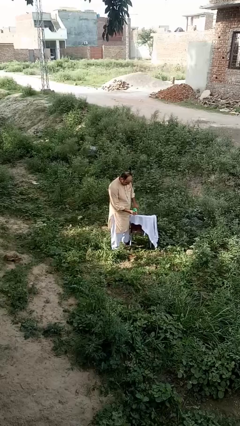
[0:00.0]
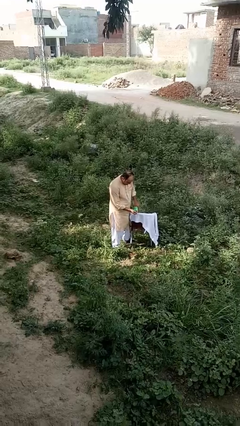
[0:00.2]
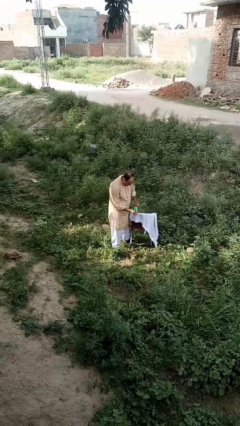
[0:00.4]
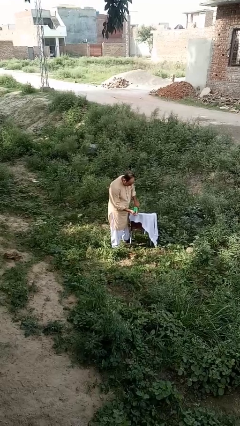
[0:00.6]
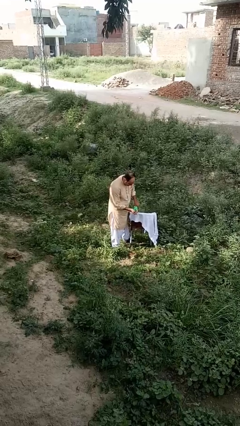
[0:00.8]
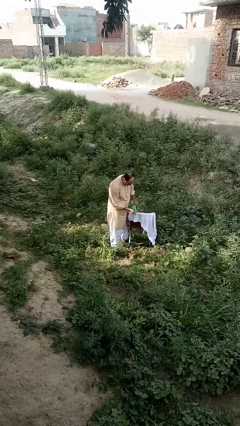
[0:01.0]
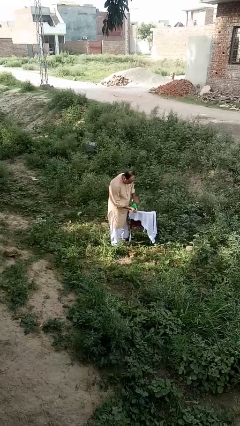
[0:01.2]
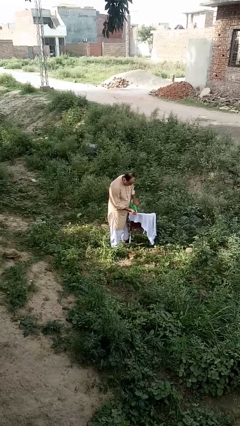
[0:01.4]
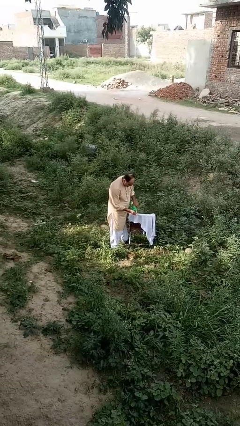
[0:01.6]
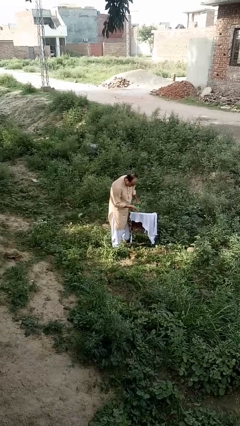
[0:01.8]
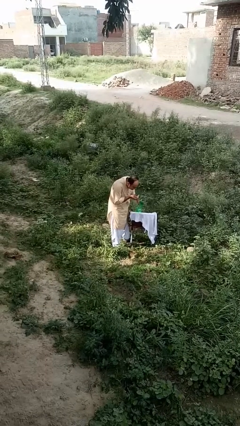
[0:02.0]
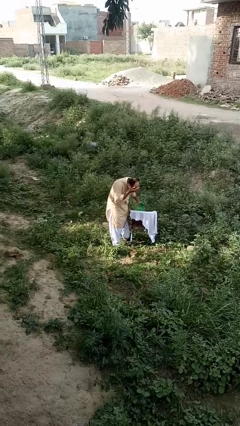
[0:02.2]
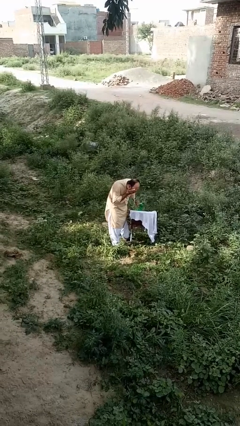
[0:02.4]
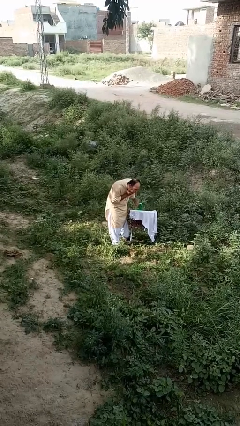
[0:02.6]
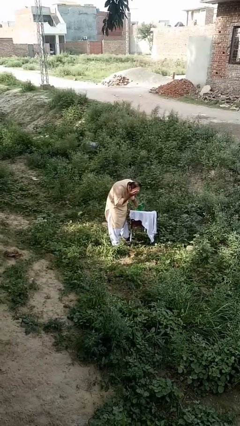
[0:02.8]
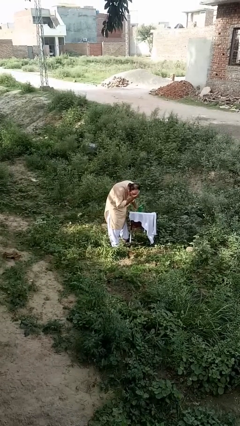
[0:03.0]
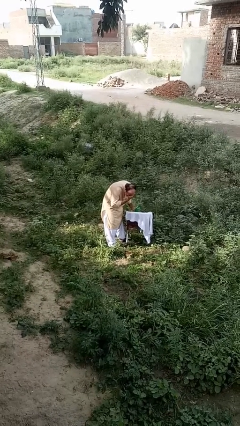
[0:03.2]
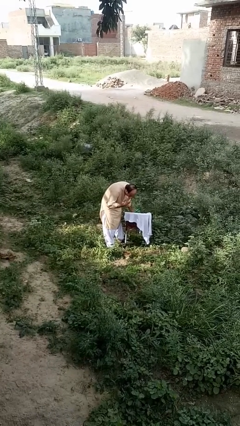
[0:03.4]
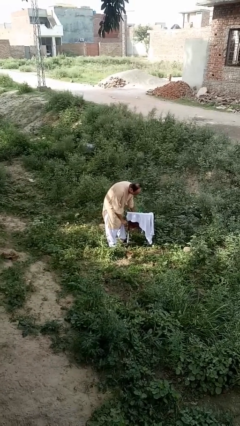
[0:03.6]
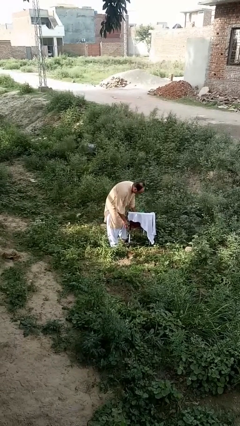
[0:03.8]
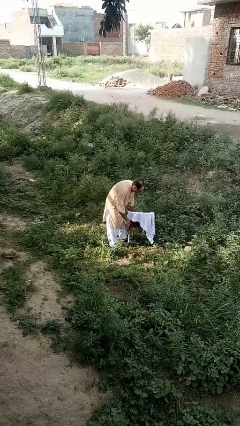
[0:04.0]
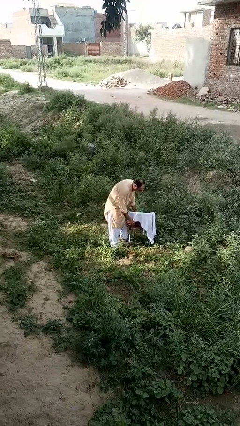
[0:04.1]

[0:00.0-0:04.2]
person washes face

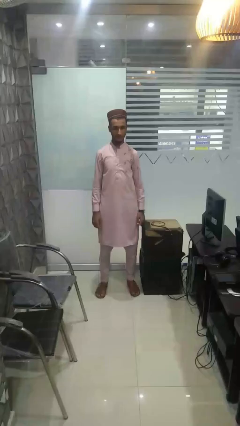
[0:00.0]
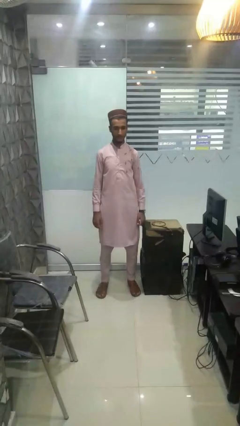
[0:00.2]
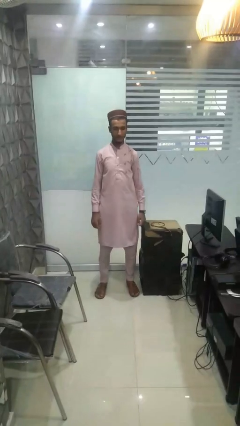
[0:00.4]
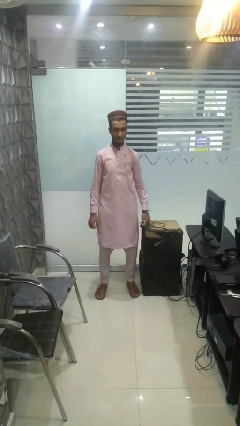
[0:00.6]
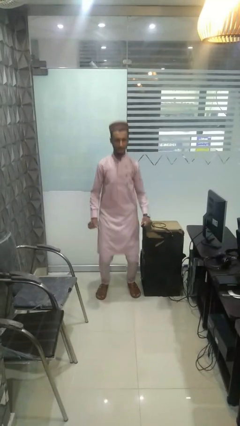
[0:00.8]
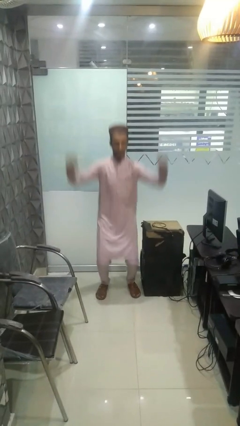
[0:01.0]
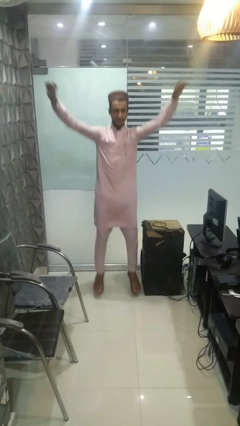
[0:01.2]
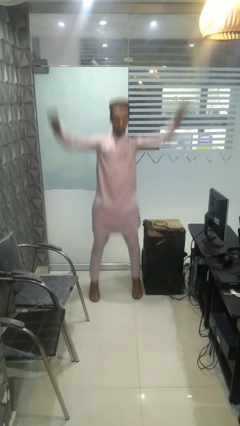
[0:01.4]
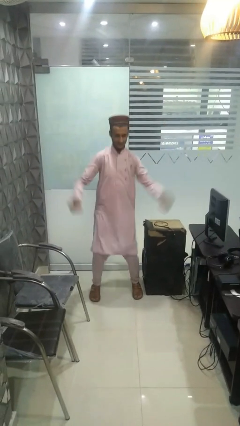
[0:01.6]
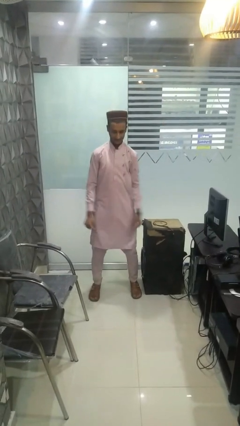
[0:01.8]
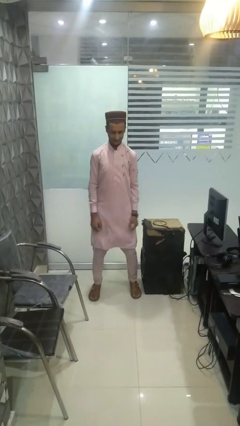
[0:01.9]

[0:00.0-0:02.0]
person exercises with jumping jacks

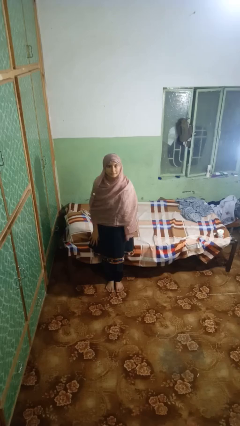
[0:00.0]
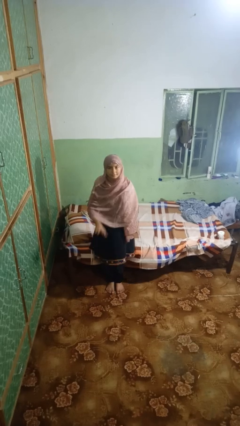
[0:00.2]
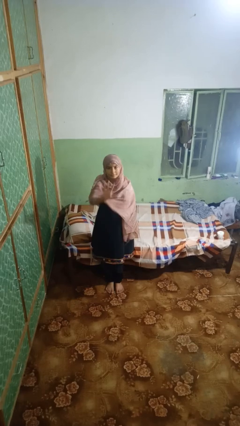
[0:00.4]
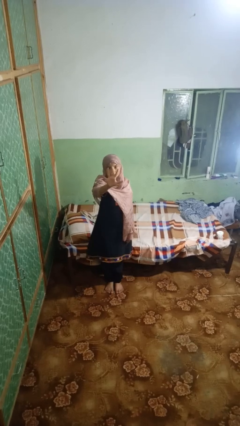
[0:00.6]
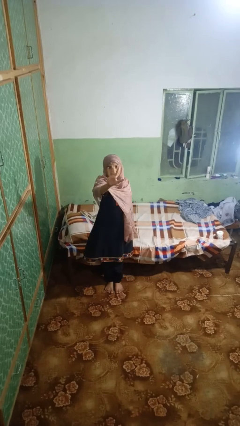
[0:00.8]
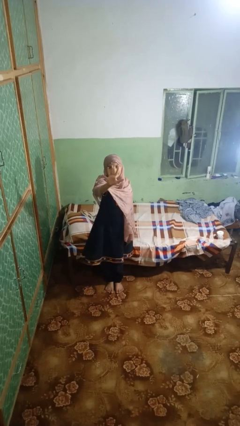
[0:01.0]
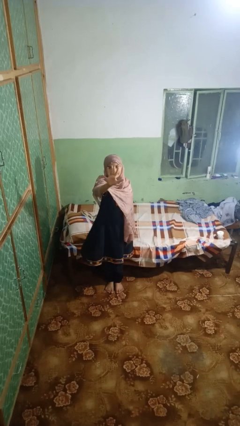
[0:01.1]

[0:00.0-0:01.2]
person gestures number five

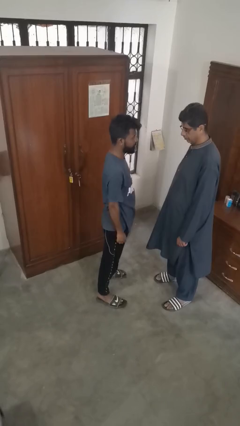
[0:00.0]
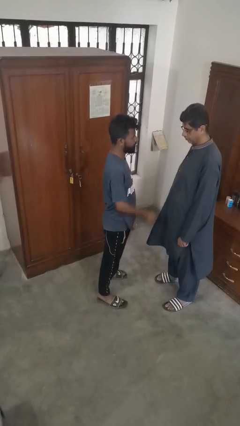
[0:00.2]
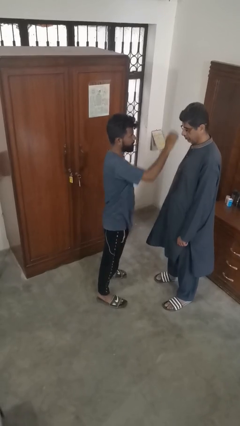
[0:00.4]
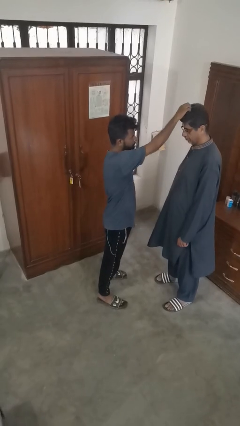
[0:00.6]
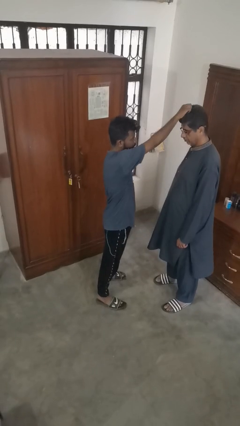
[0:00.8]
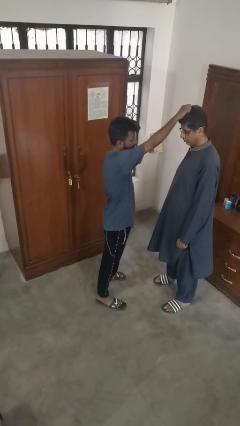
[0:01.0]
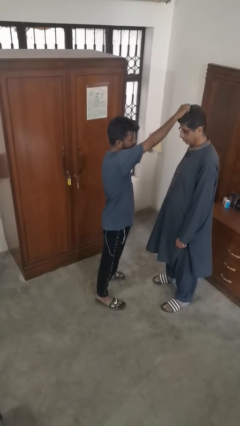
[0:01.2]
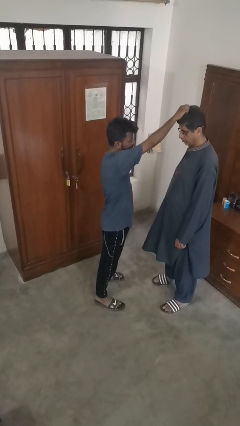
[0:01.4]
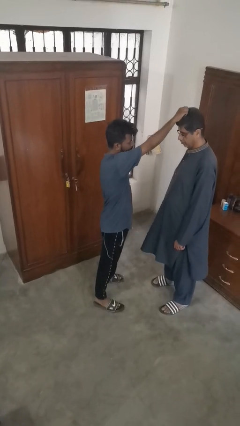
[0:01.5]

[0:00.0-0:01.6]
person grabs person by hair

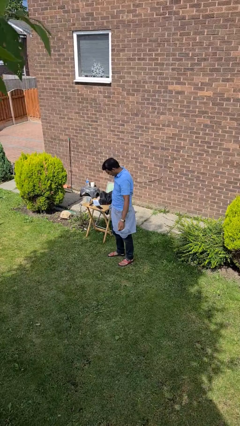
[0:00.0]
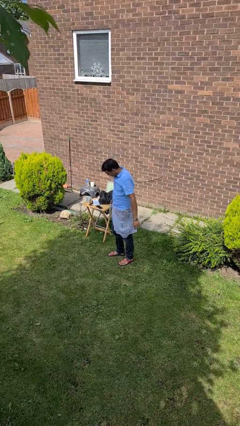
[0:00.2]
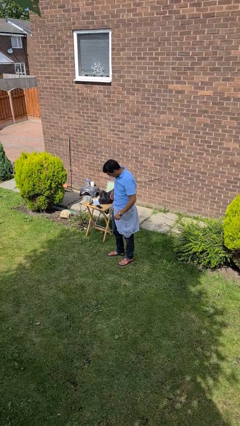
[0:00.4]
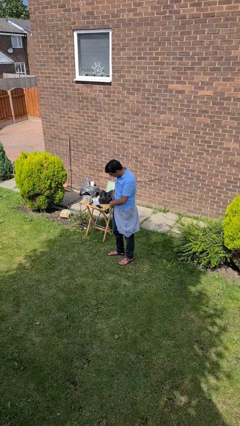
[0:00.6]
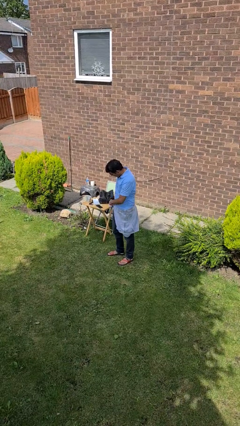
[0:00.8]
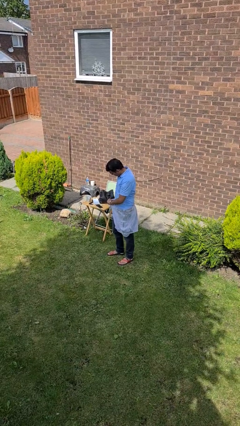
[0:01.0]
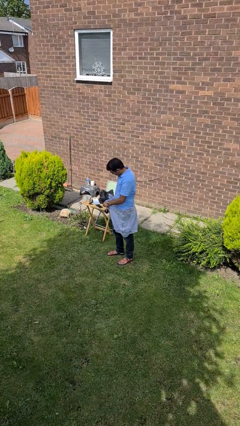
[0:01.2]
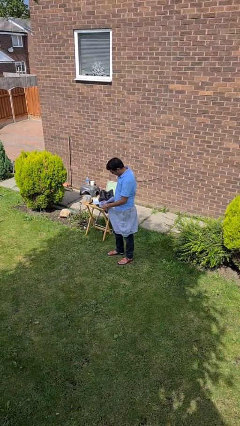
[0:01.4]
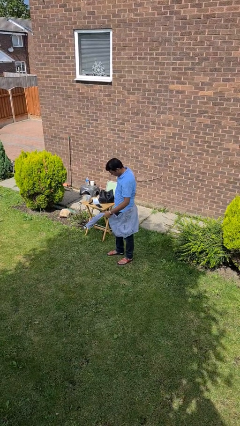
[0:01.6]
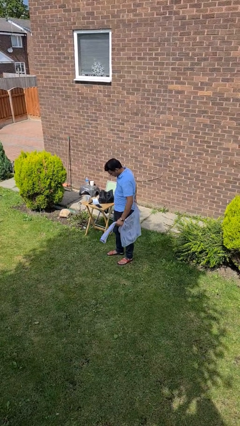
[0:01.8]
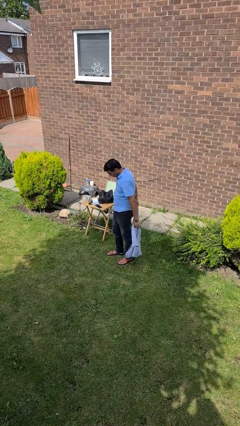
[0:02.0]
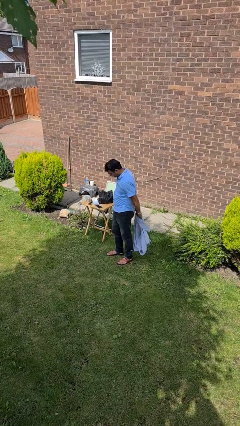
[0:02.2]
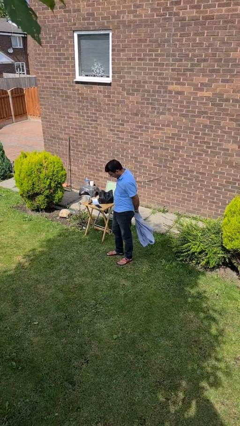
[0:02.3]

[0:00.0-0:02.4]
person unties jacket around waist

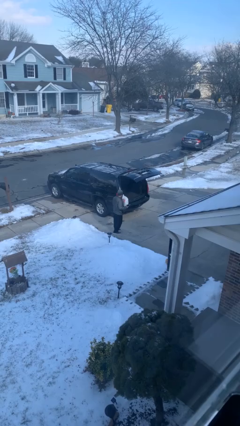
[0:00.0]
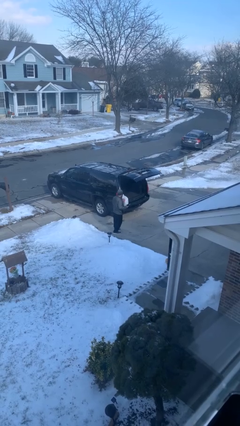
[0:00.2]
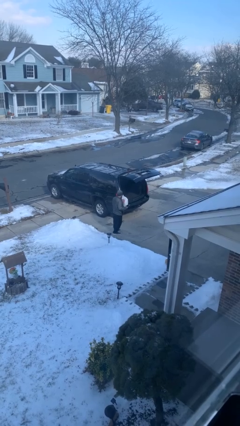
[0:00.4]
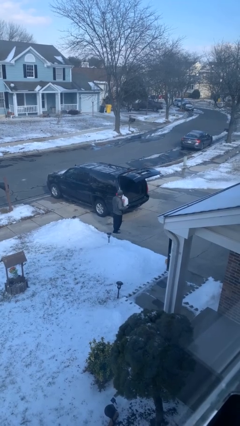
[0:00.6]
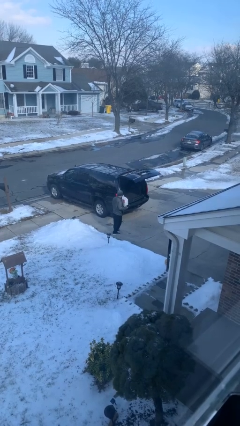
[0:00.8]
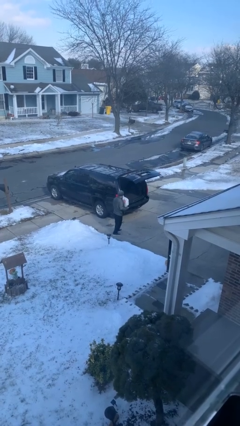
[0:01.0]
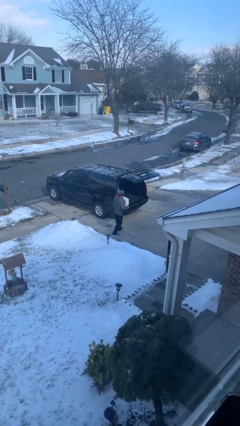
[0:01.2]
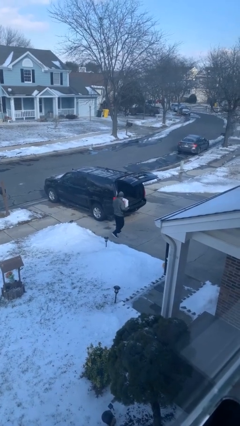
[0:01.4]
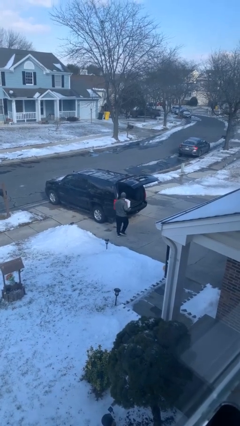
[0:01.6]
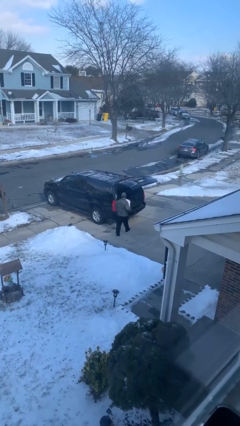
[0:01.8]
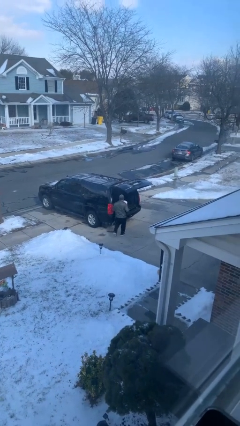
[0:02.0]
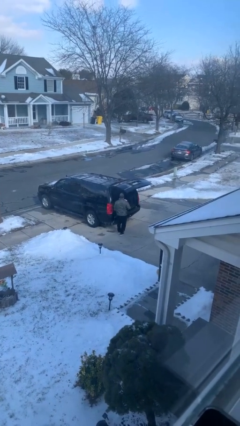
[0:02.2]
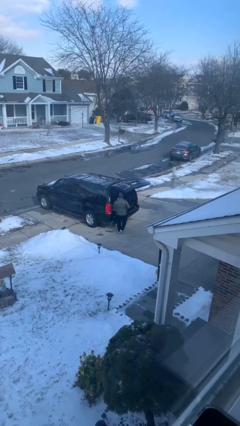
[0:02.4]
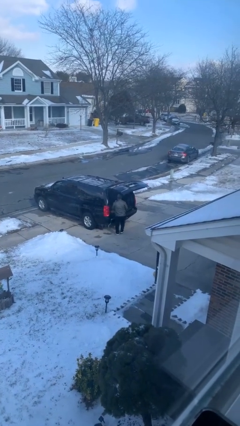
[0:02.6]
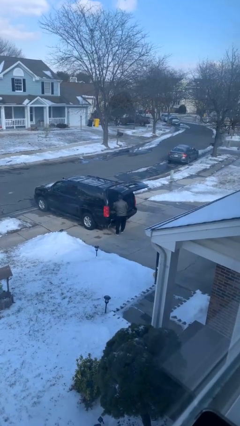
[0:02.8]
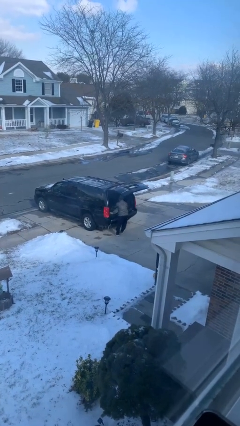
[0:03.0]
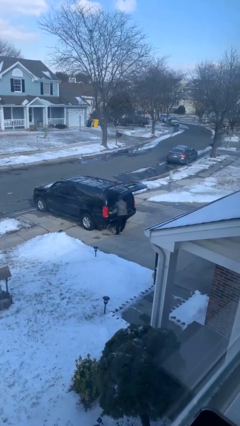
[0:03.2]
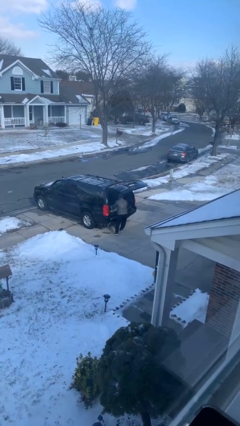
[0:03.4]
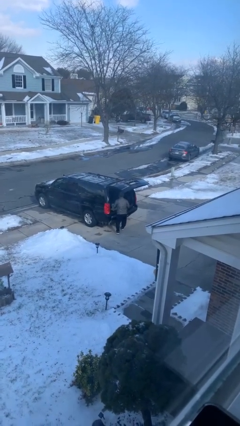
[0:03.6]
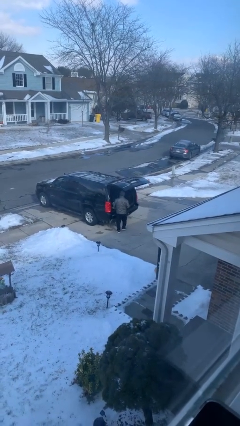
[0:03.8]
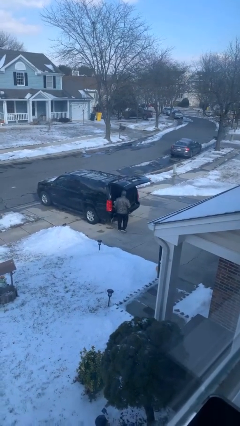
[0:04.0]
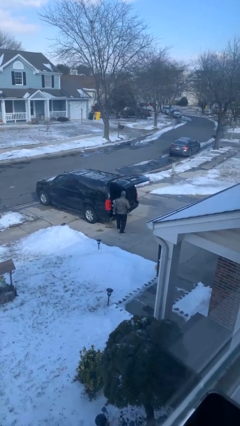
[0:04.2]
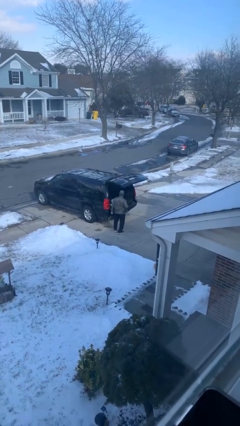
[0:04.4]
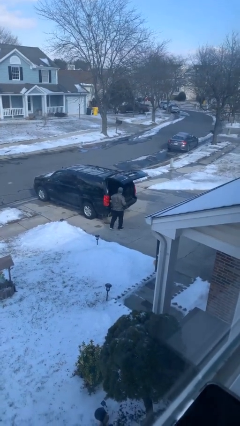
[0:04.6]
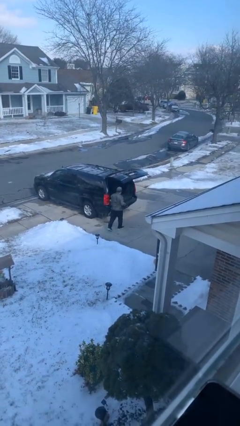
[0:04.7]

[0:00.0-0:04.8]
person loads car

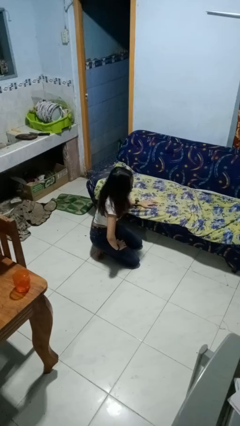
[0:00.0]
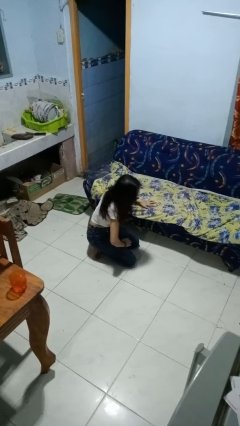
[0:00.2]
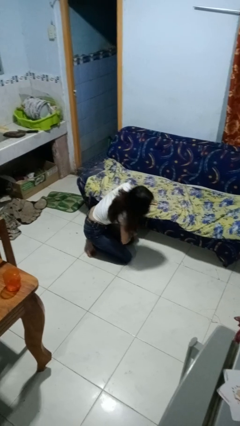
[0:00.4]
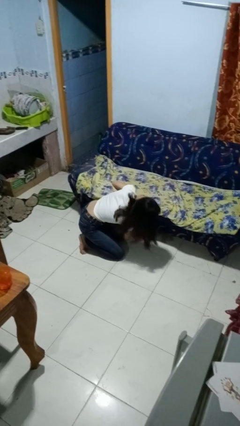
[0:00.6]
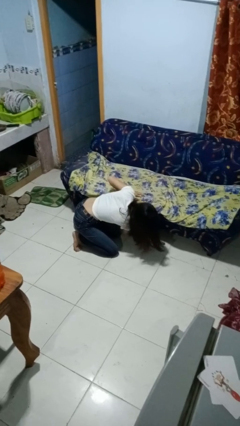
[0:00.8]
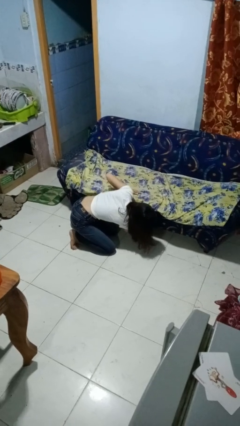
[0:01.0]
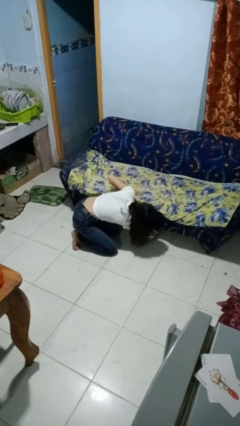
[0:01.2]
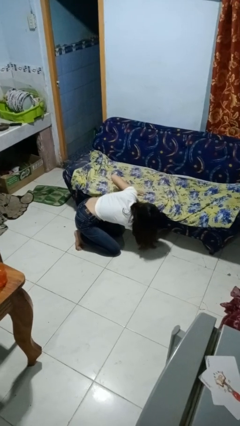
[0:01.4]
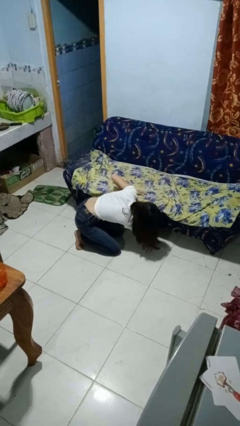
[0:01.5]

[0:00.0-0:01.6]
person searches under couch
